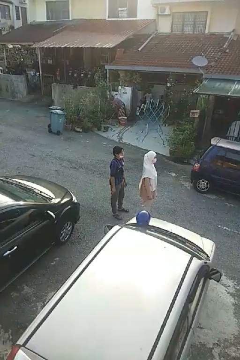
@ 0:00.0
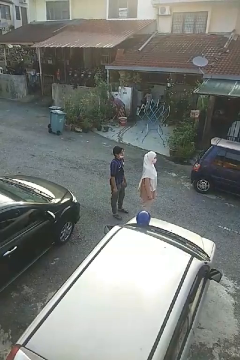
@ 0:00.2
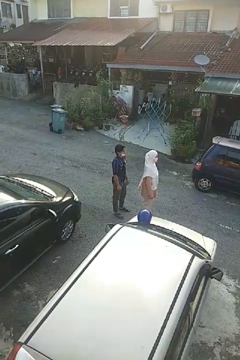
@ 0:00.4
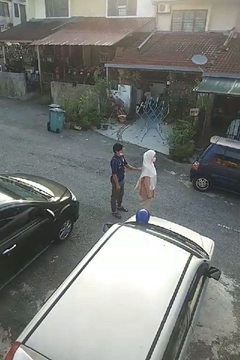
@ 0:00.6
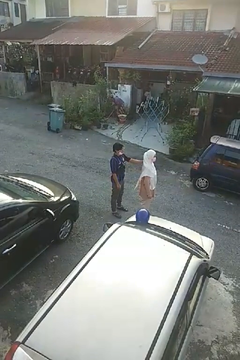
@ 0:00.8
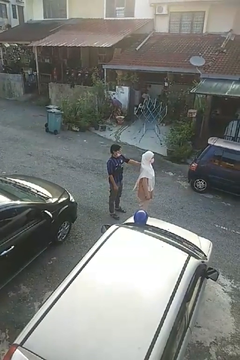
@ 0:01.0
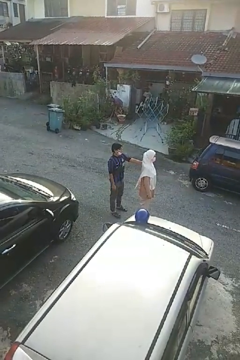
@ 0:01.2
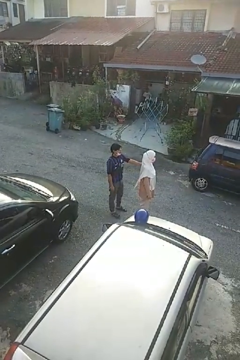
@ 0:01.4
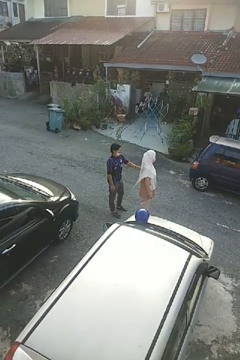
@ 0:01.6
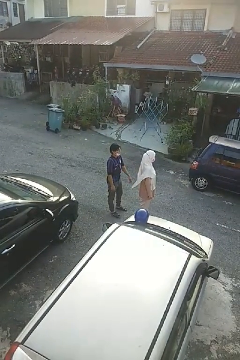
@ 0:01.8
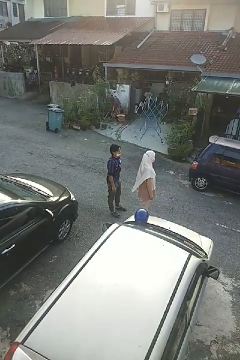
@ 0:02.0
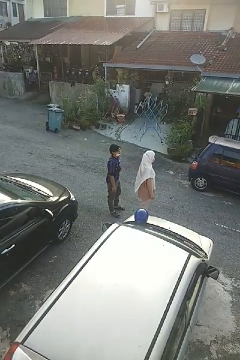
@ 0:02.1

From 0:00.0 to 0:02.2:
person touches back of person

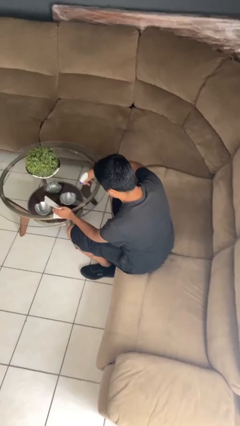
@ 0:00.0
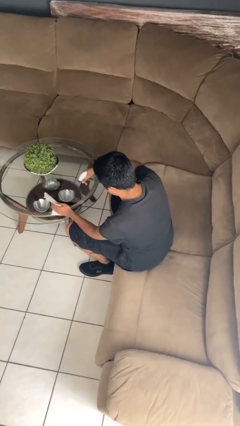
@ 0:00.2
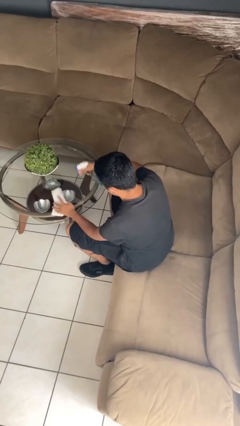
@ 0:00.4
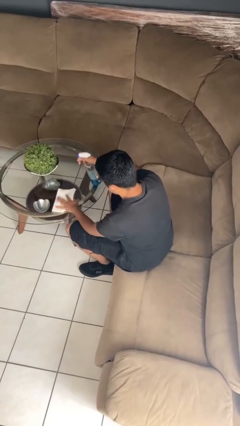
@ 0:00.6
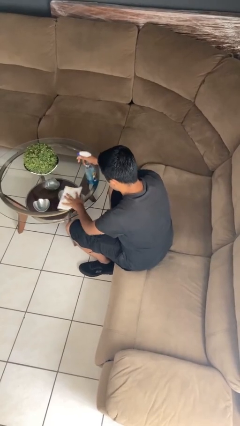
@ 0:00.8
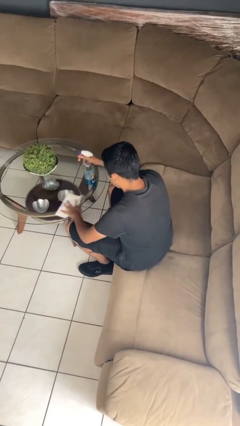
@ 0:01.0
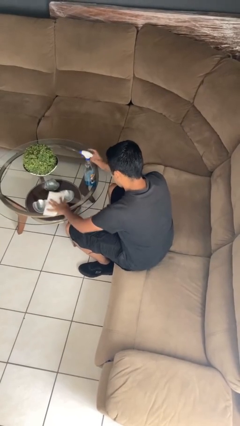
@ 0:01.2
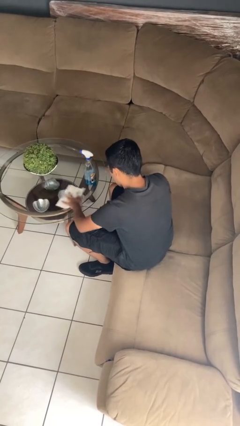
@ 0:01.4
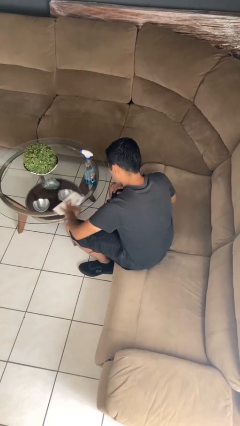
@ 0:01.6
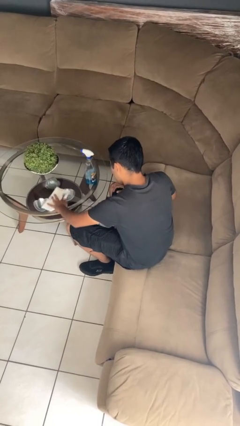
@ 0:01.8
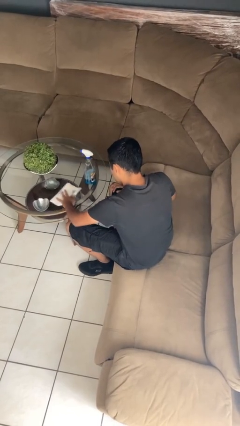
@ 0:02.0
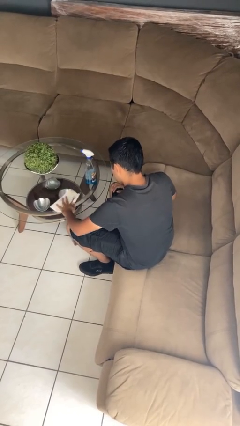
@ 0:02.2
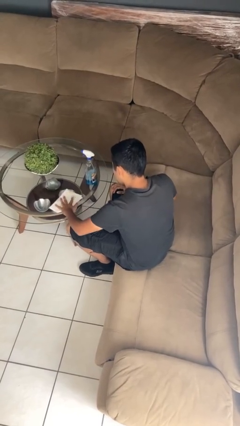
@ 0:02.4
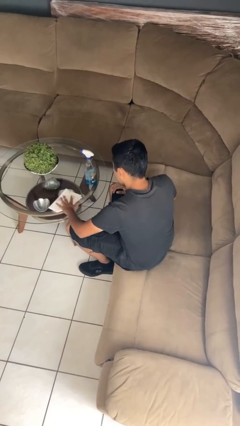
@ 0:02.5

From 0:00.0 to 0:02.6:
person cleans table with rag

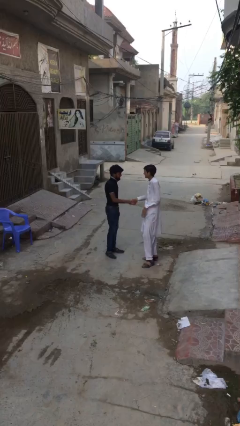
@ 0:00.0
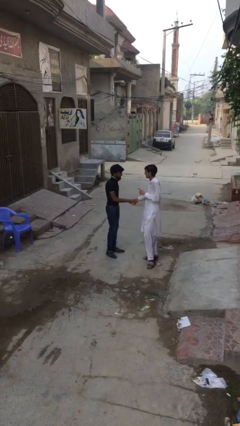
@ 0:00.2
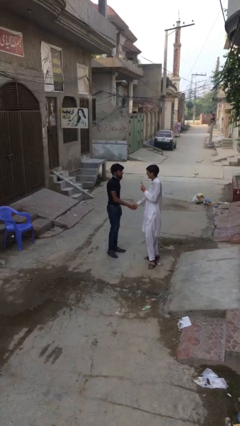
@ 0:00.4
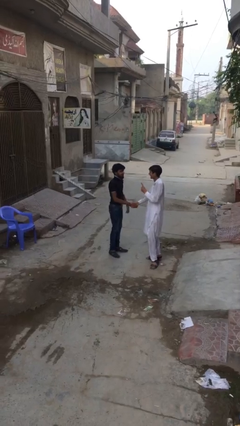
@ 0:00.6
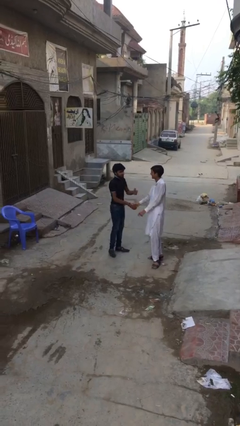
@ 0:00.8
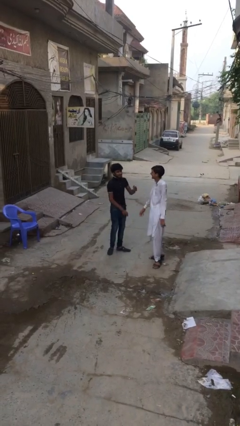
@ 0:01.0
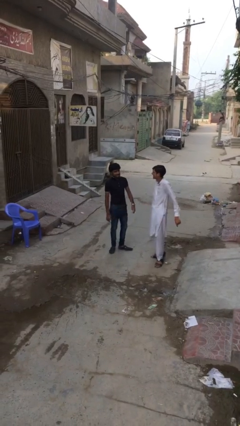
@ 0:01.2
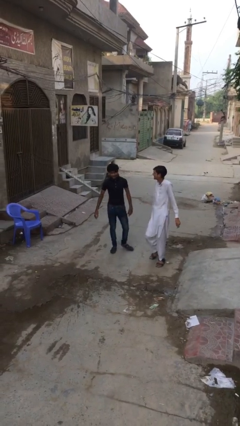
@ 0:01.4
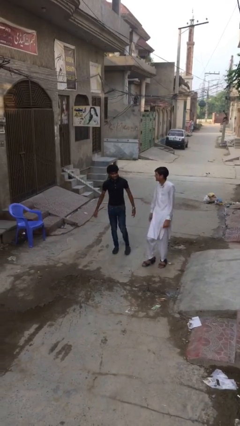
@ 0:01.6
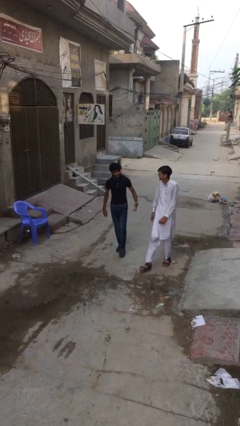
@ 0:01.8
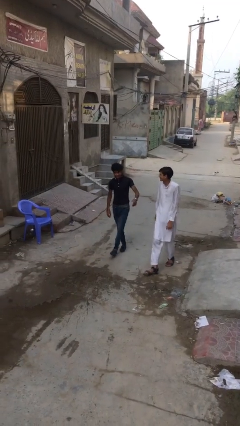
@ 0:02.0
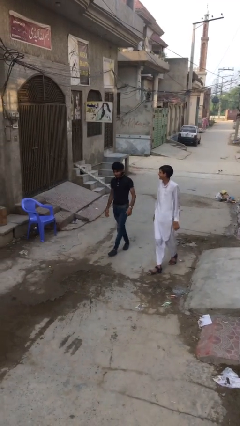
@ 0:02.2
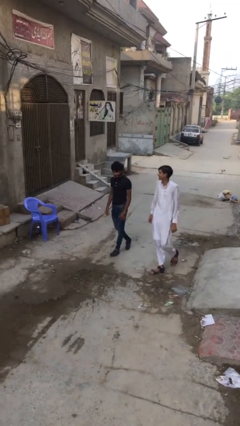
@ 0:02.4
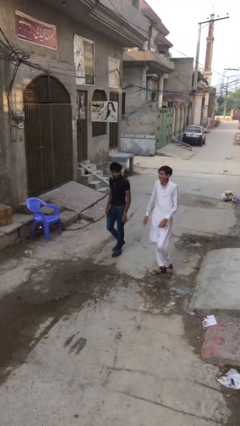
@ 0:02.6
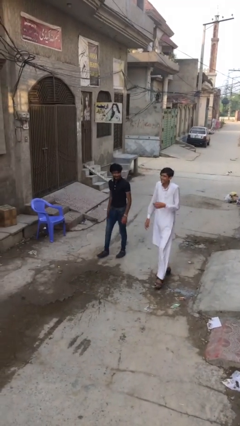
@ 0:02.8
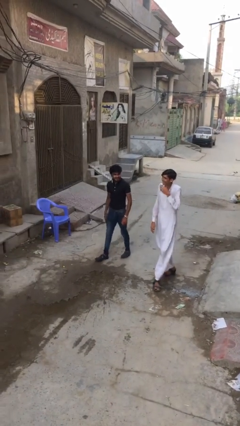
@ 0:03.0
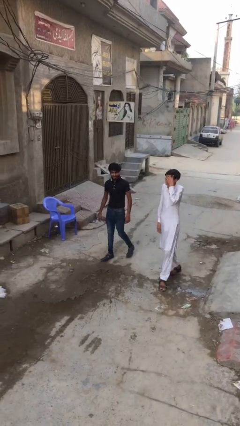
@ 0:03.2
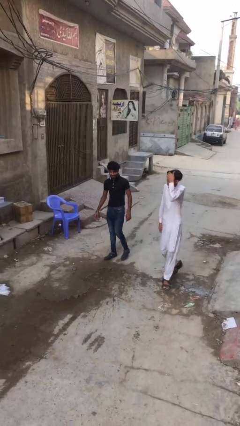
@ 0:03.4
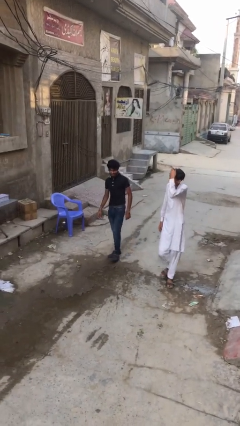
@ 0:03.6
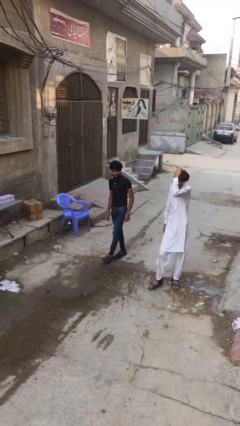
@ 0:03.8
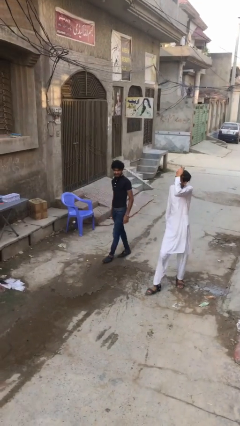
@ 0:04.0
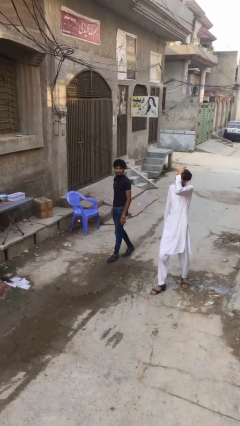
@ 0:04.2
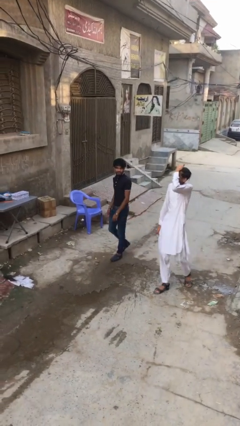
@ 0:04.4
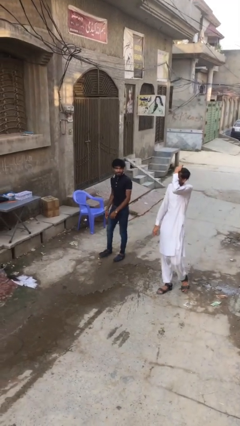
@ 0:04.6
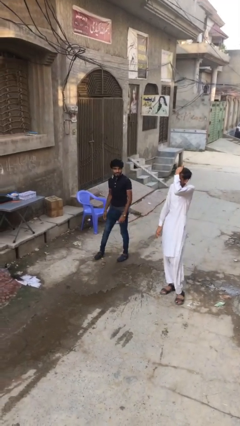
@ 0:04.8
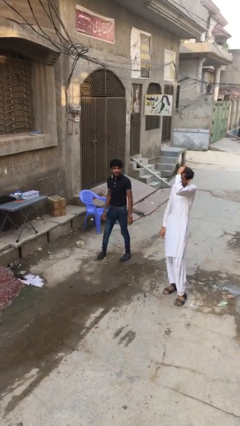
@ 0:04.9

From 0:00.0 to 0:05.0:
person talks to person

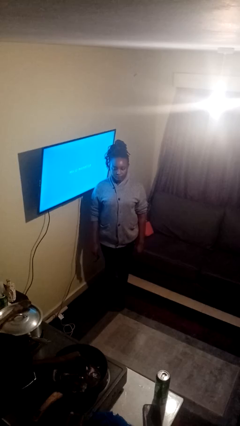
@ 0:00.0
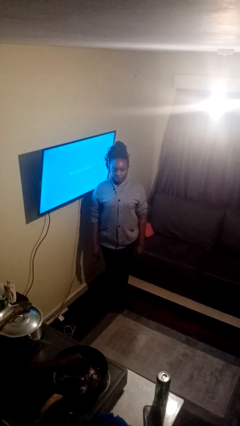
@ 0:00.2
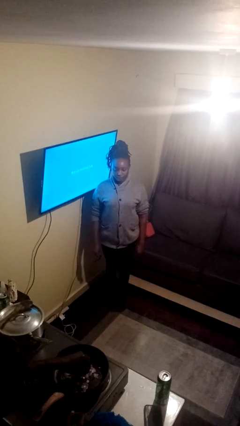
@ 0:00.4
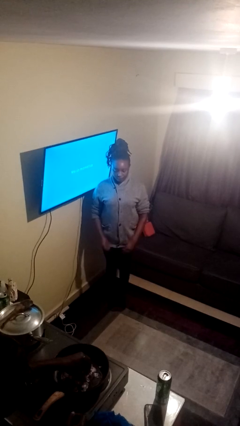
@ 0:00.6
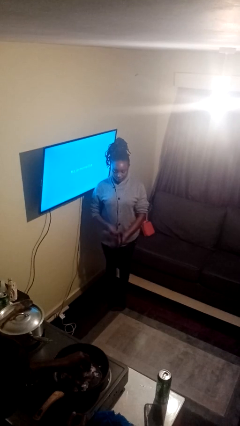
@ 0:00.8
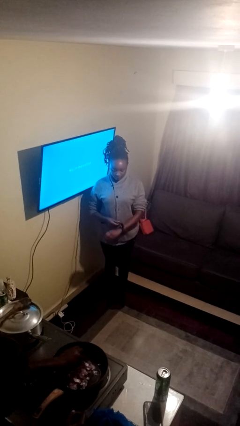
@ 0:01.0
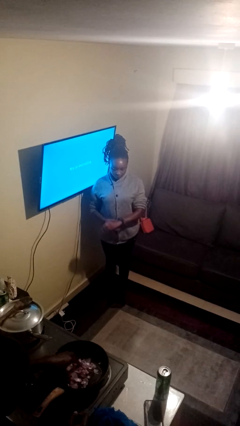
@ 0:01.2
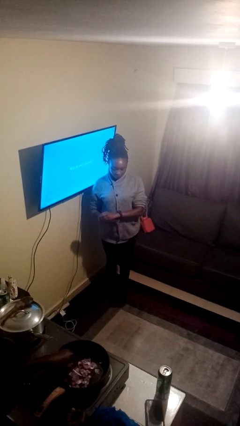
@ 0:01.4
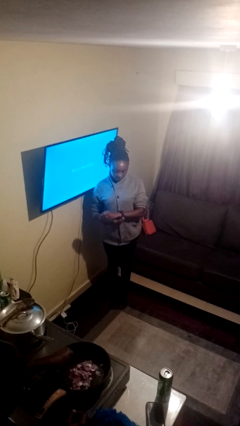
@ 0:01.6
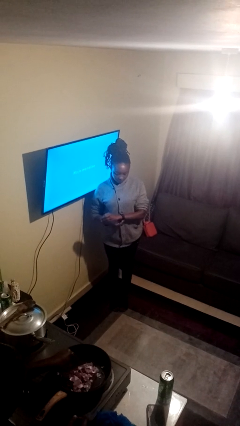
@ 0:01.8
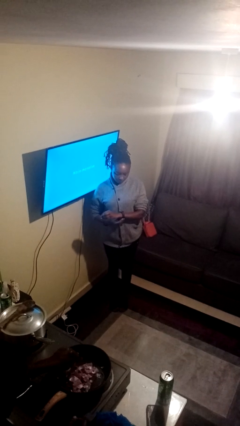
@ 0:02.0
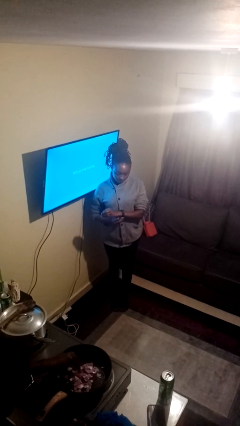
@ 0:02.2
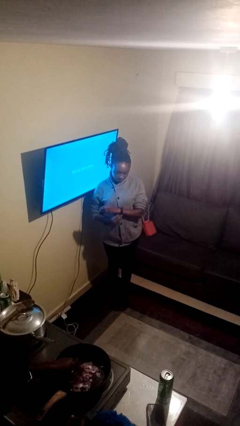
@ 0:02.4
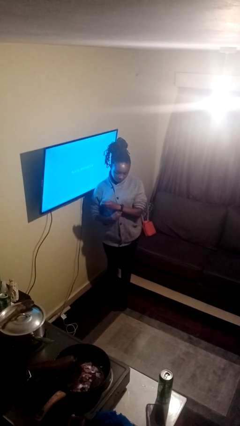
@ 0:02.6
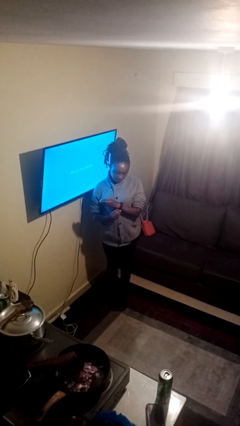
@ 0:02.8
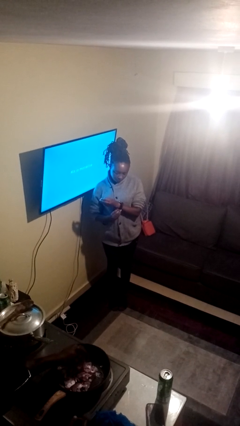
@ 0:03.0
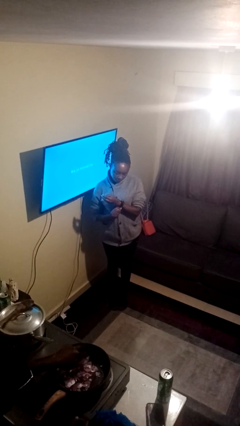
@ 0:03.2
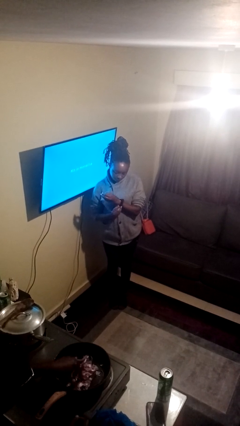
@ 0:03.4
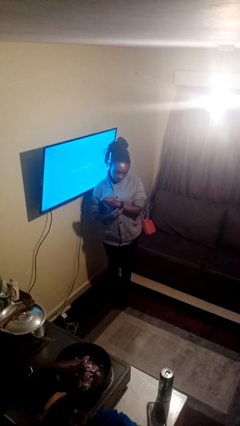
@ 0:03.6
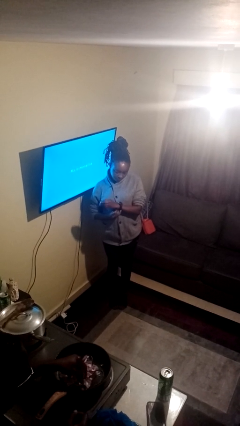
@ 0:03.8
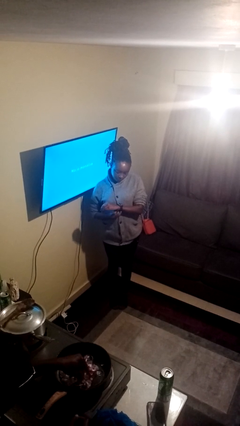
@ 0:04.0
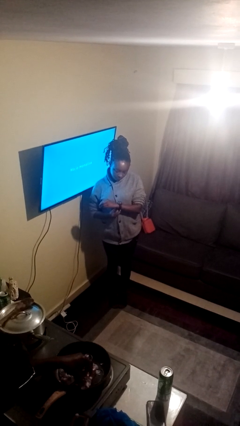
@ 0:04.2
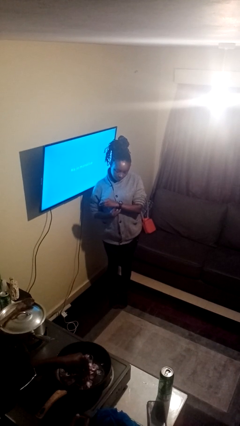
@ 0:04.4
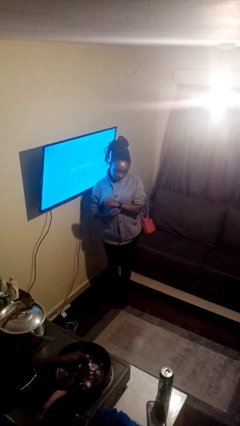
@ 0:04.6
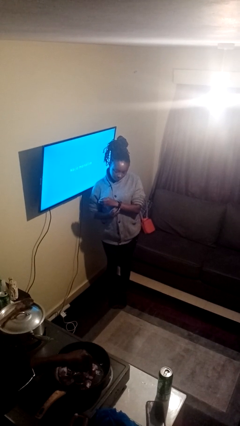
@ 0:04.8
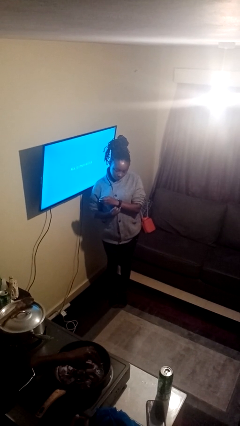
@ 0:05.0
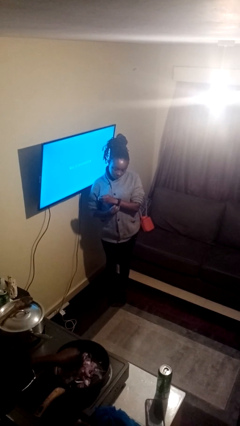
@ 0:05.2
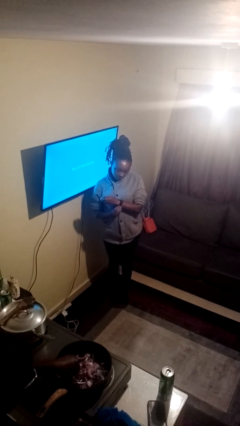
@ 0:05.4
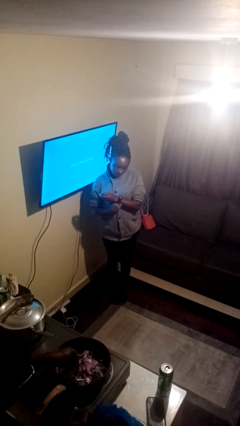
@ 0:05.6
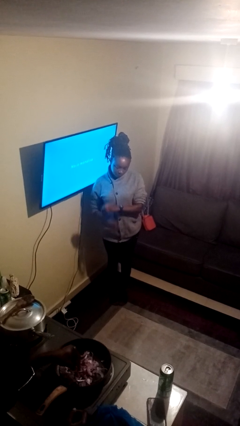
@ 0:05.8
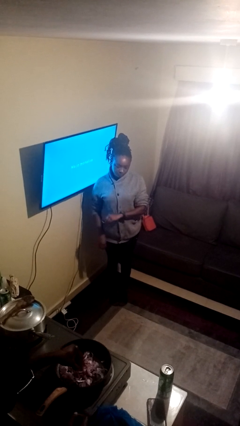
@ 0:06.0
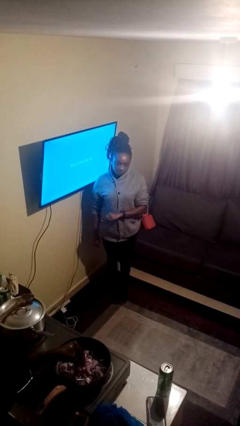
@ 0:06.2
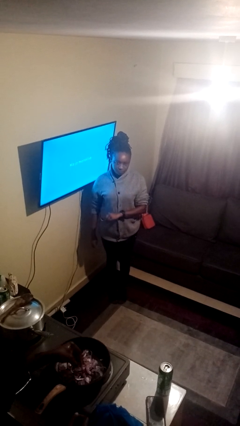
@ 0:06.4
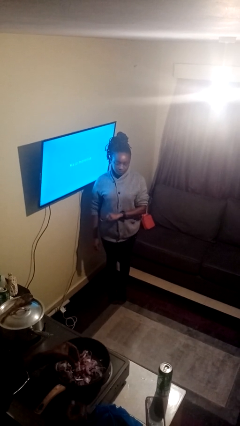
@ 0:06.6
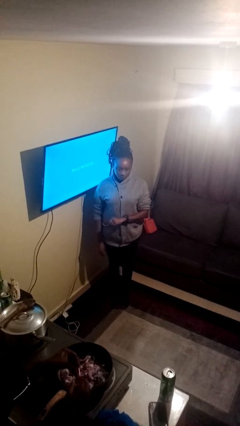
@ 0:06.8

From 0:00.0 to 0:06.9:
person puts on wristwatch

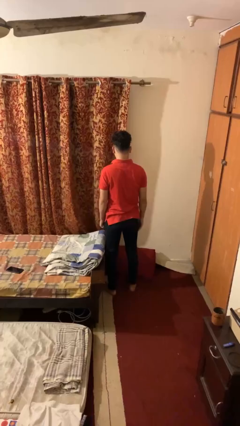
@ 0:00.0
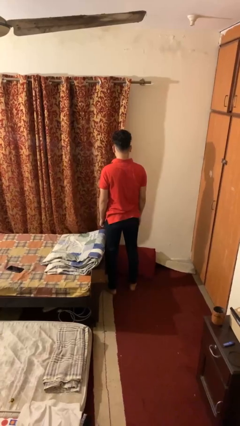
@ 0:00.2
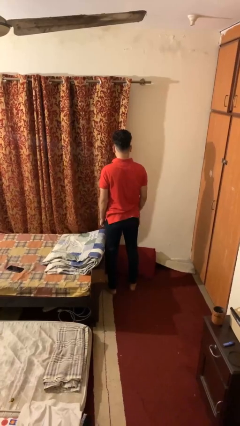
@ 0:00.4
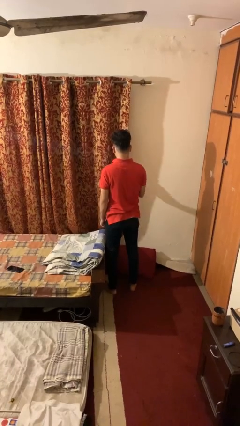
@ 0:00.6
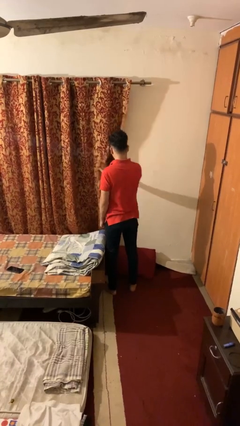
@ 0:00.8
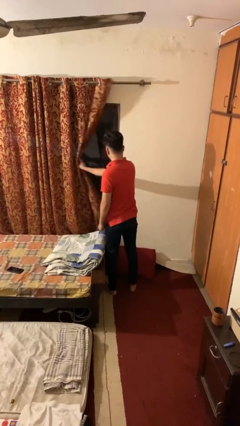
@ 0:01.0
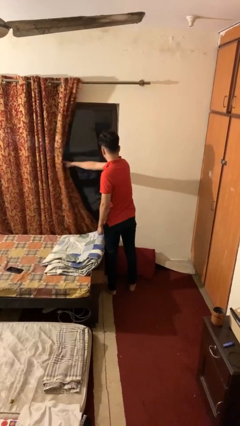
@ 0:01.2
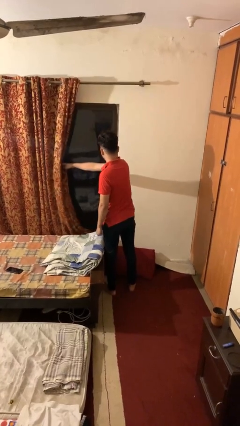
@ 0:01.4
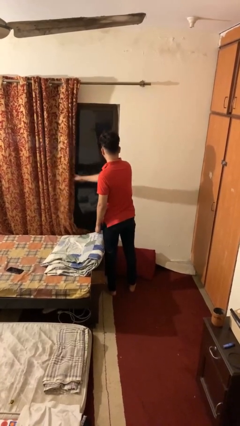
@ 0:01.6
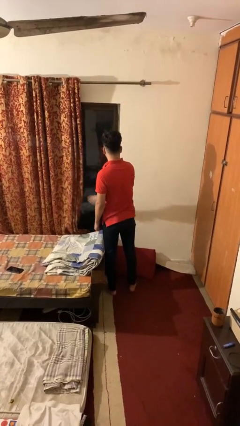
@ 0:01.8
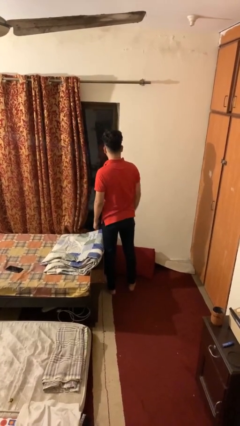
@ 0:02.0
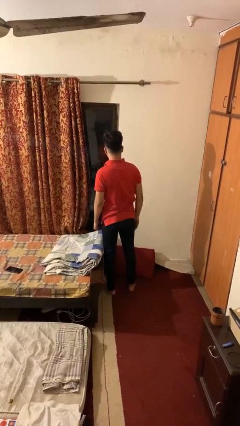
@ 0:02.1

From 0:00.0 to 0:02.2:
person opens curtains
